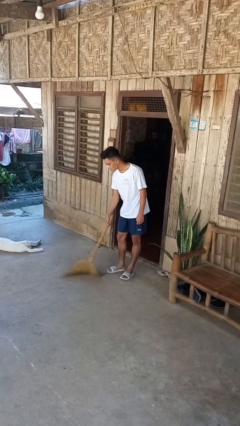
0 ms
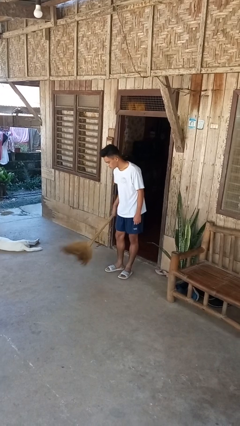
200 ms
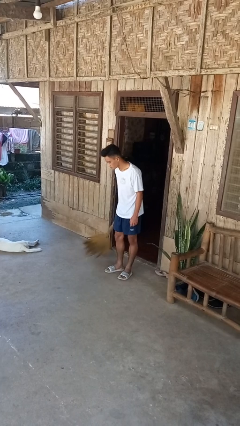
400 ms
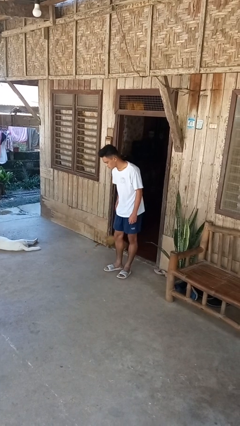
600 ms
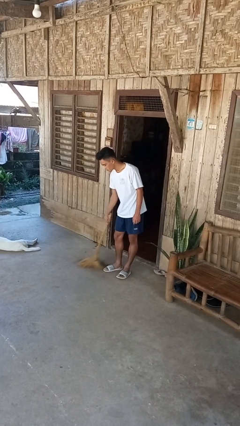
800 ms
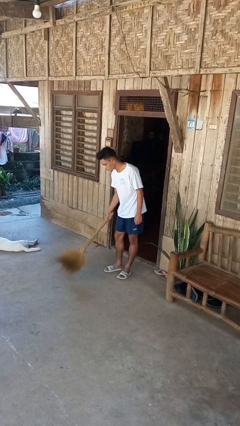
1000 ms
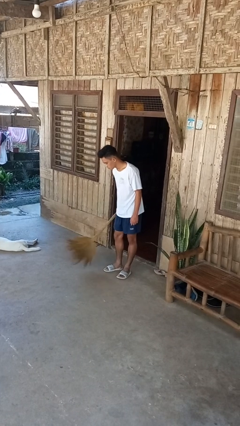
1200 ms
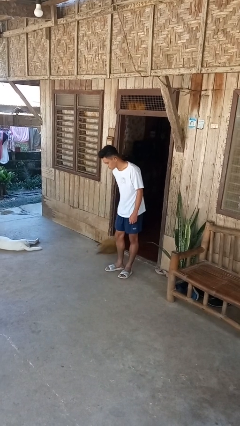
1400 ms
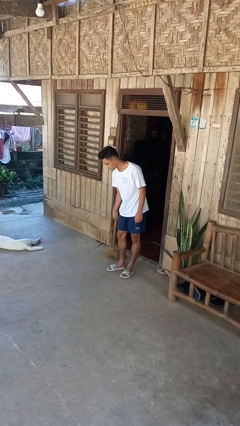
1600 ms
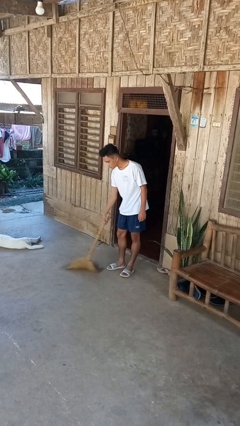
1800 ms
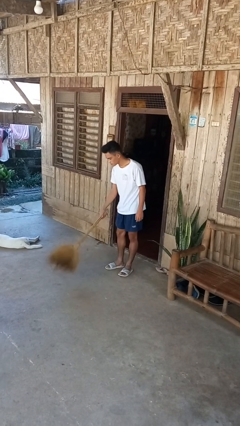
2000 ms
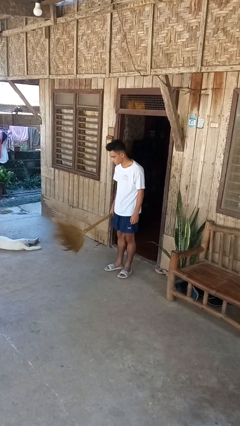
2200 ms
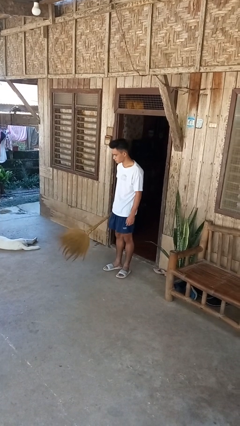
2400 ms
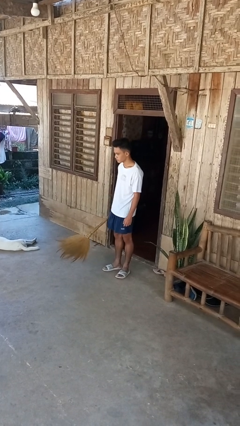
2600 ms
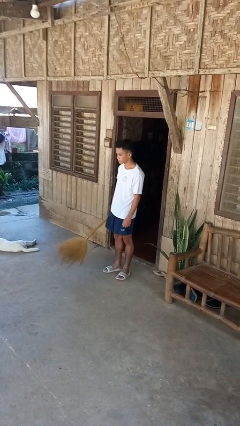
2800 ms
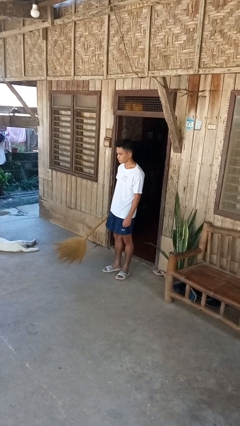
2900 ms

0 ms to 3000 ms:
person sweeps floor

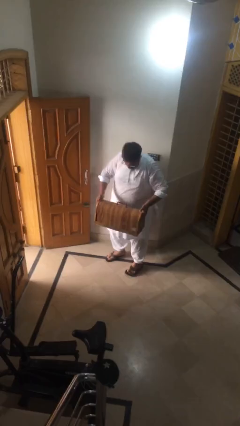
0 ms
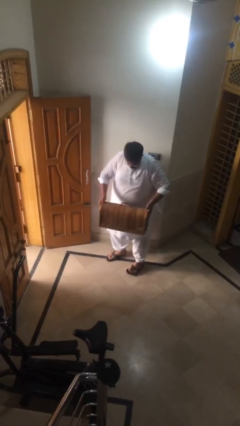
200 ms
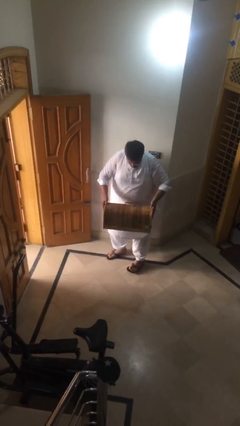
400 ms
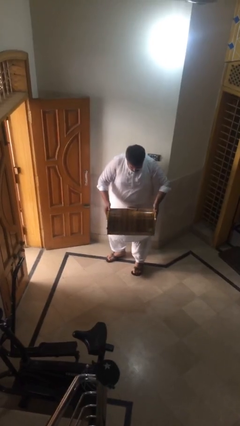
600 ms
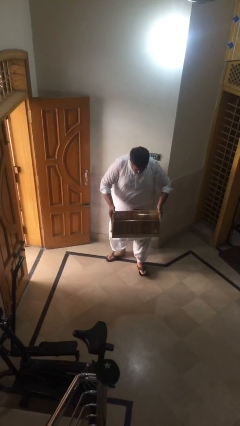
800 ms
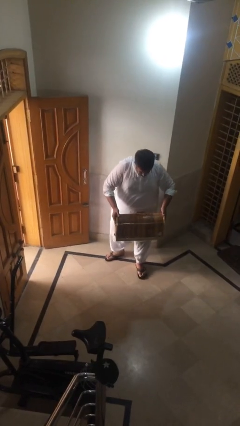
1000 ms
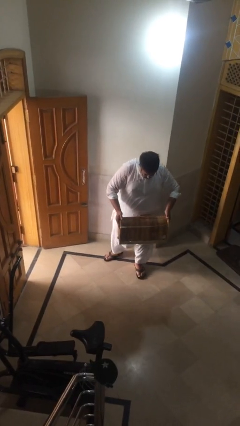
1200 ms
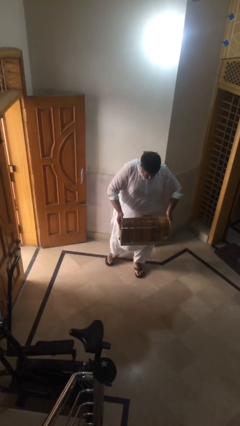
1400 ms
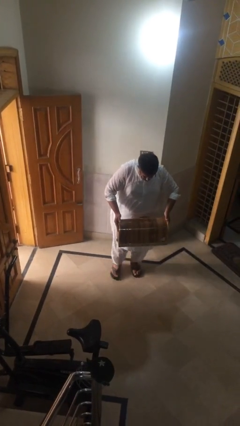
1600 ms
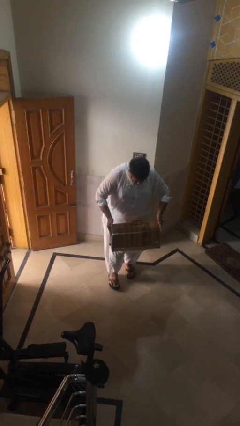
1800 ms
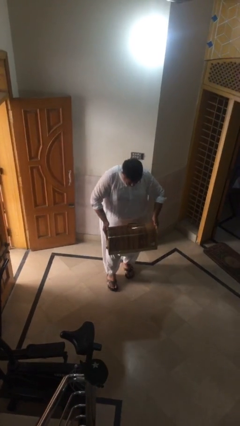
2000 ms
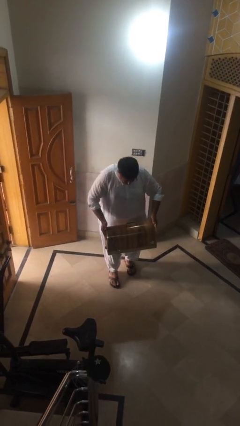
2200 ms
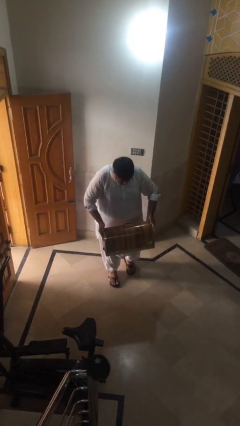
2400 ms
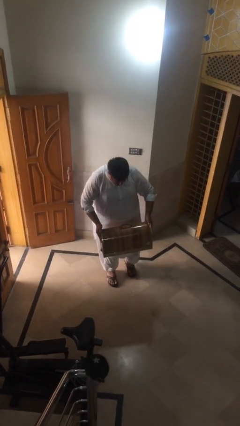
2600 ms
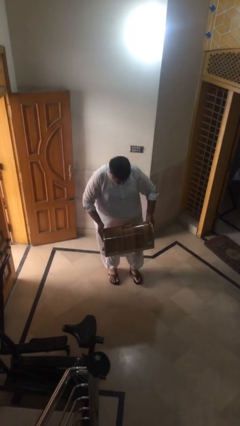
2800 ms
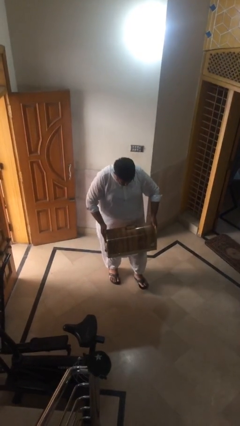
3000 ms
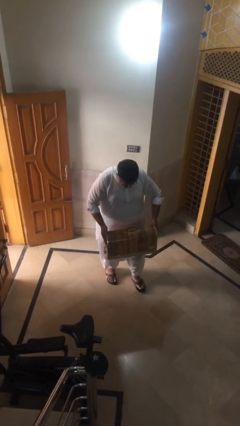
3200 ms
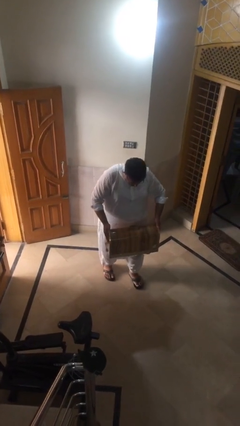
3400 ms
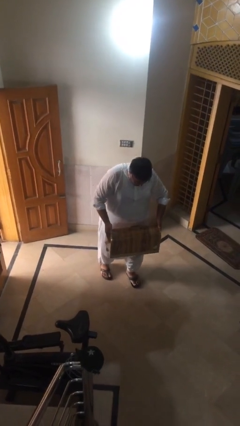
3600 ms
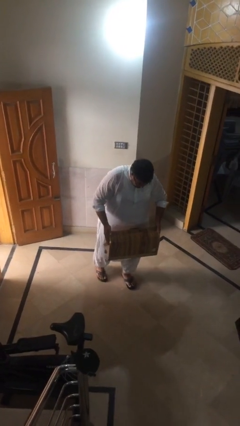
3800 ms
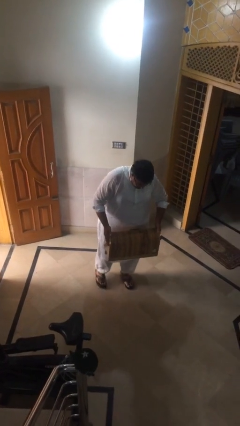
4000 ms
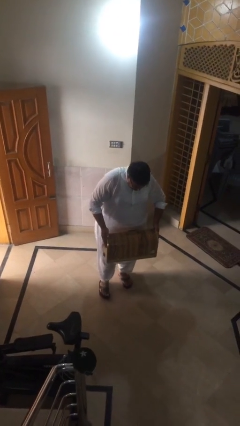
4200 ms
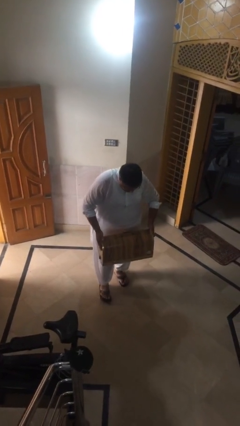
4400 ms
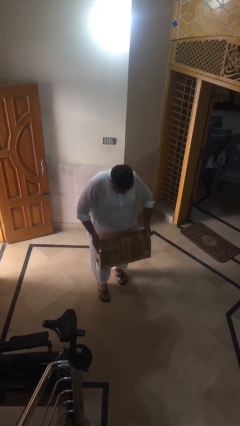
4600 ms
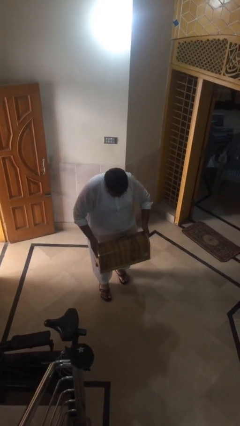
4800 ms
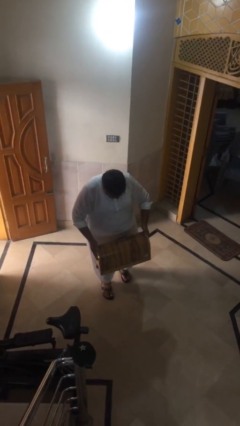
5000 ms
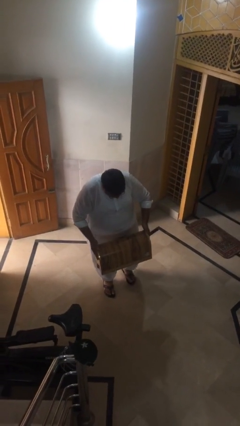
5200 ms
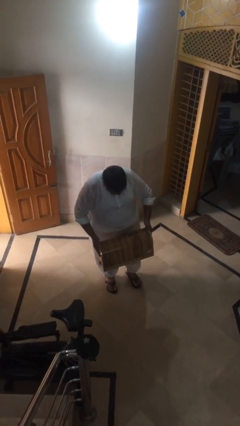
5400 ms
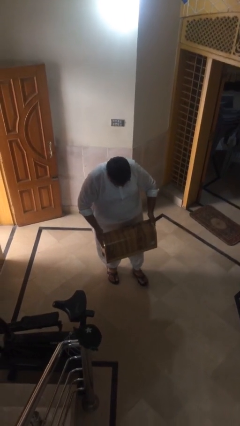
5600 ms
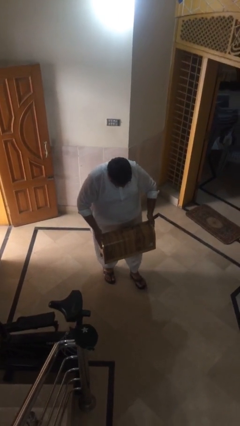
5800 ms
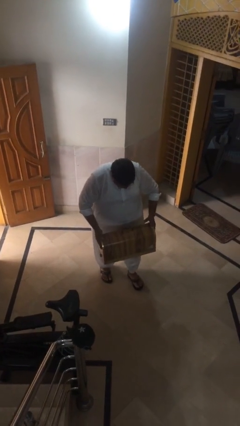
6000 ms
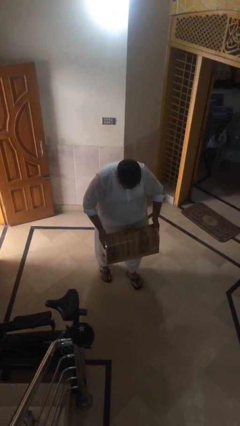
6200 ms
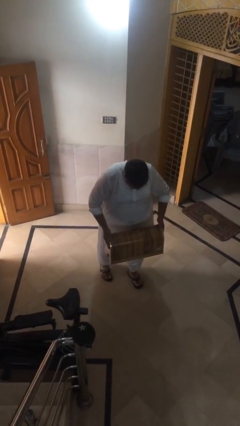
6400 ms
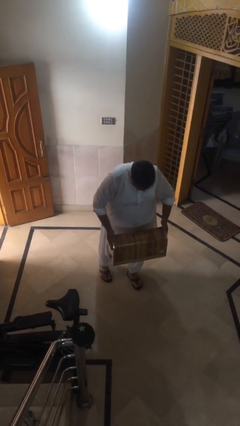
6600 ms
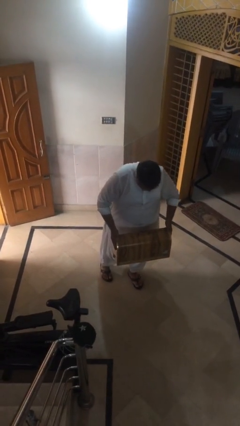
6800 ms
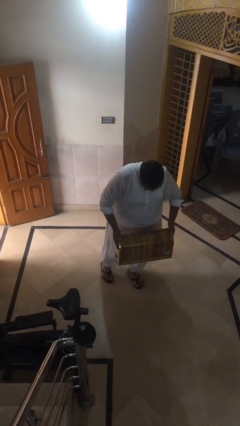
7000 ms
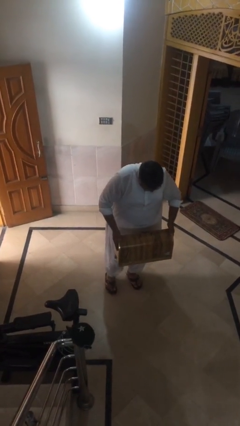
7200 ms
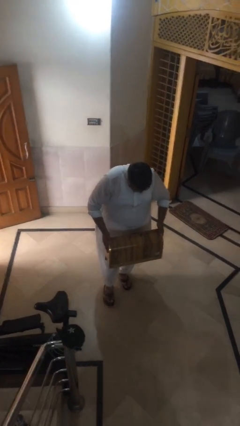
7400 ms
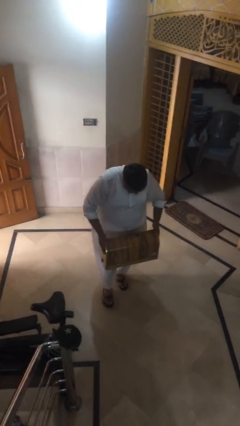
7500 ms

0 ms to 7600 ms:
person carries heavy object

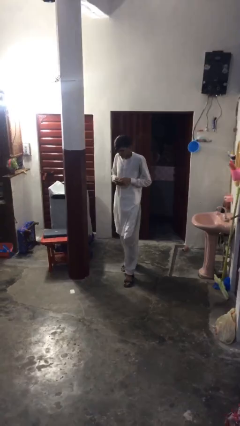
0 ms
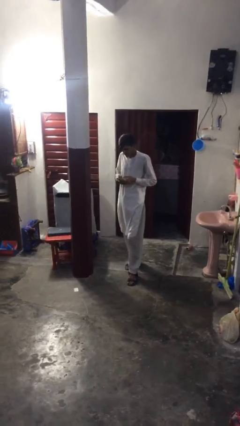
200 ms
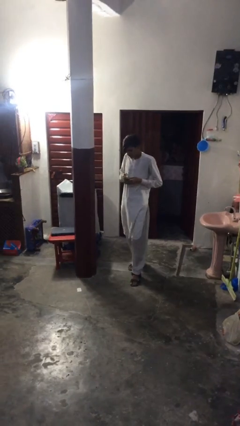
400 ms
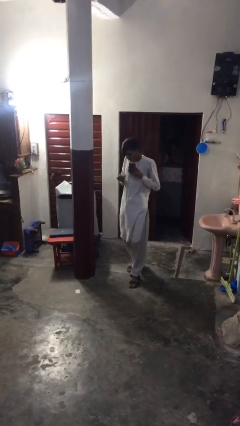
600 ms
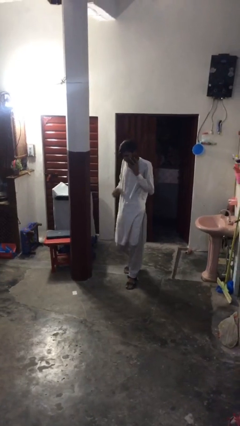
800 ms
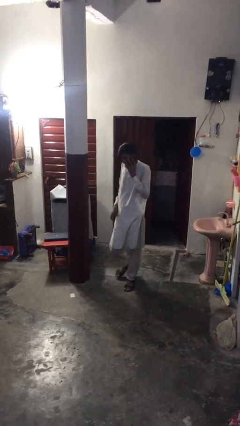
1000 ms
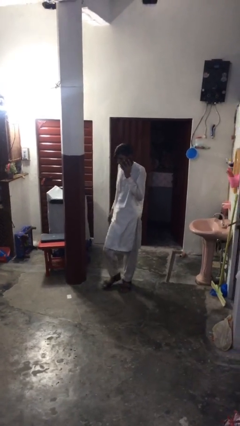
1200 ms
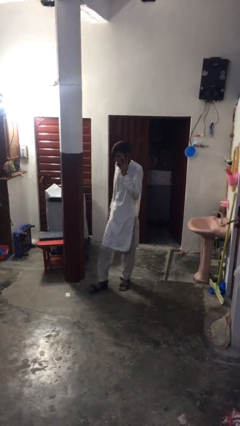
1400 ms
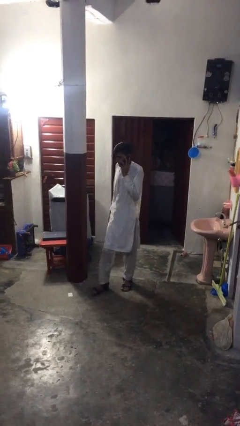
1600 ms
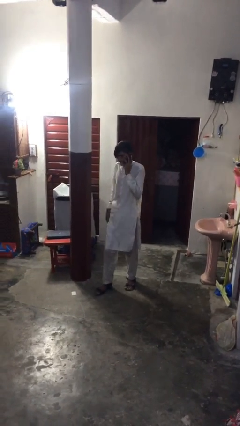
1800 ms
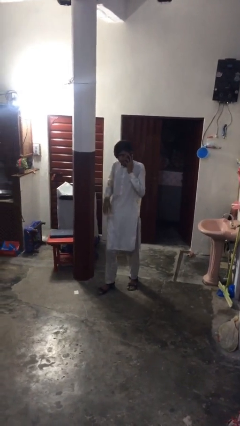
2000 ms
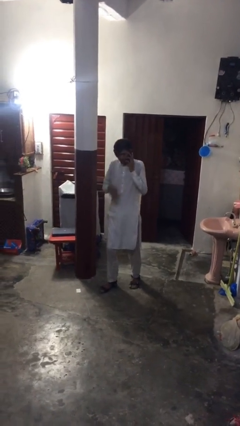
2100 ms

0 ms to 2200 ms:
person talks on phone

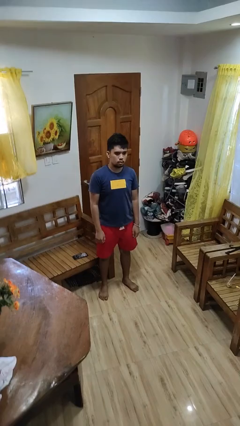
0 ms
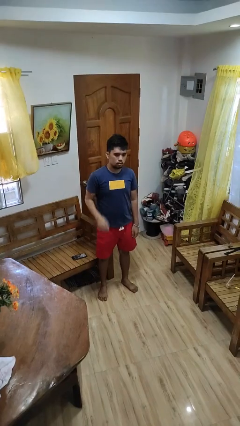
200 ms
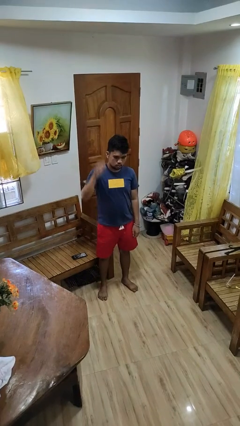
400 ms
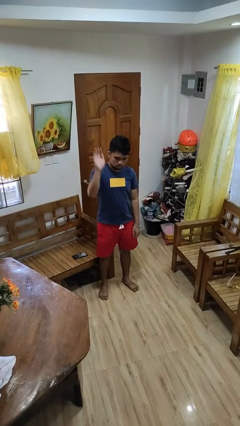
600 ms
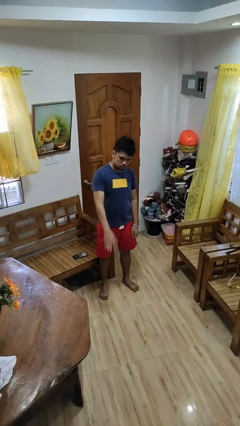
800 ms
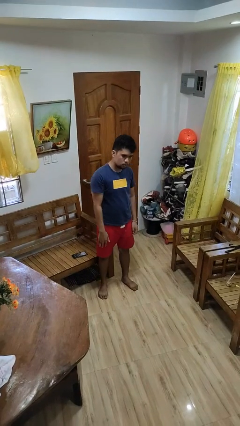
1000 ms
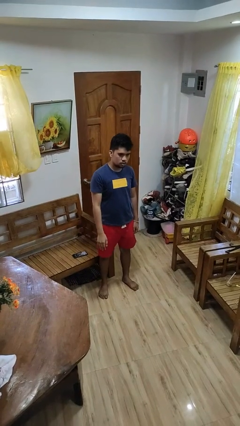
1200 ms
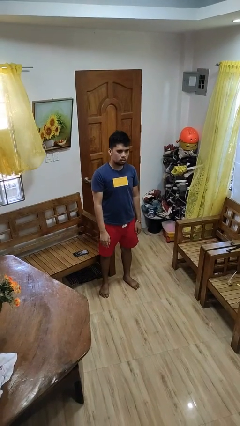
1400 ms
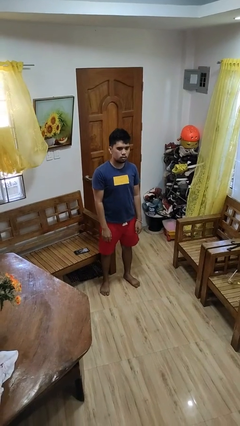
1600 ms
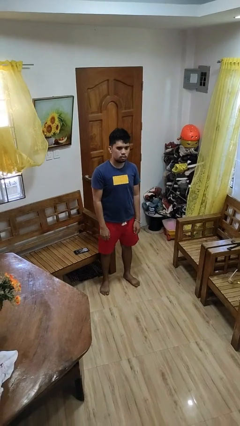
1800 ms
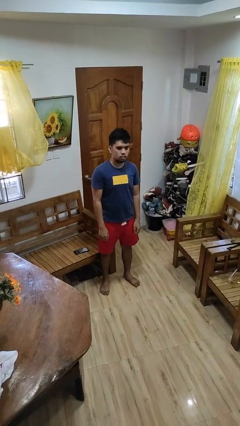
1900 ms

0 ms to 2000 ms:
person gestures swipe down

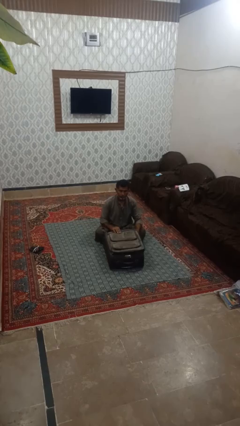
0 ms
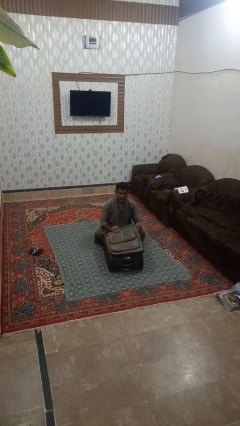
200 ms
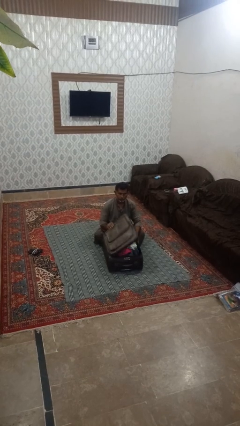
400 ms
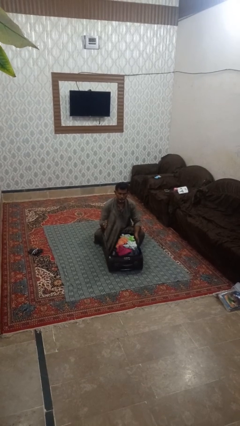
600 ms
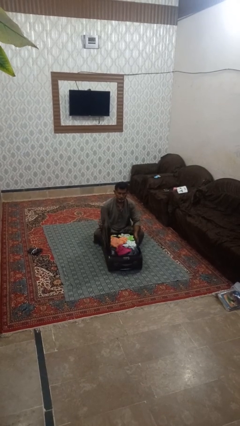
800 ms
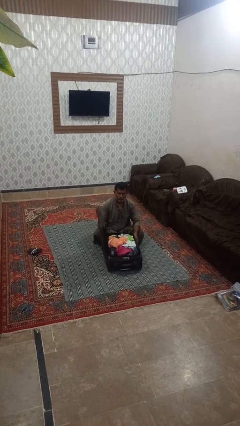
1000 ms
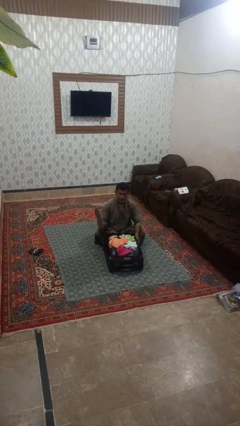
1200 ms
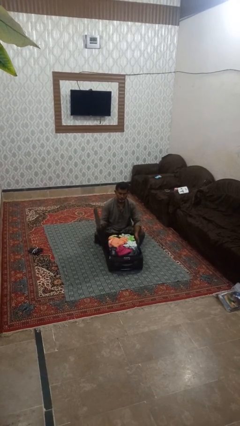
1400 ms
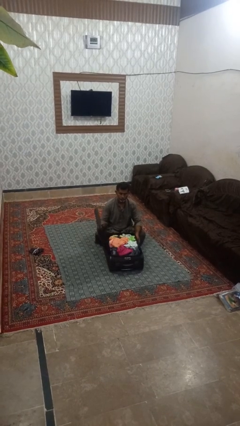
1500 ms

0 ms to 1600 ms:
person opens suitcase

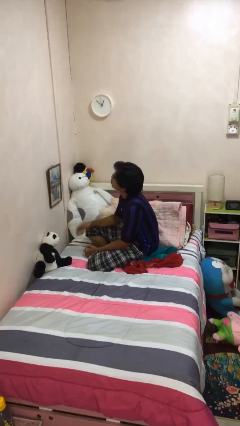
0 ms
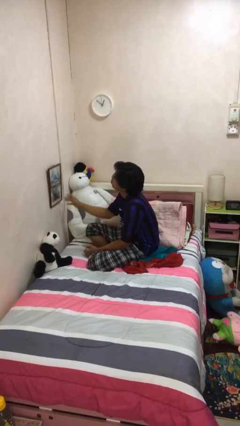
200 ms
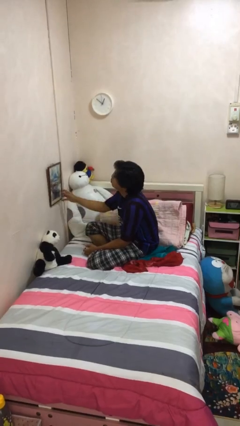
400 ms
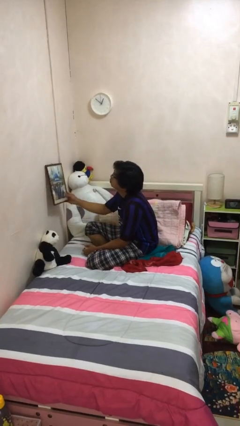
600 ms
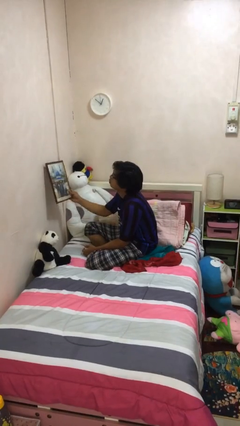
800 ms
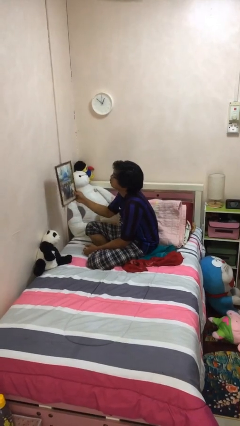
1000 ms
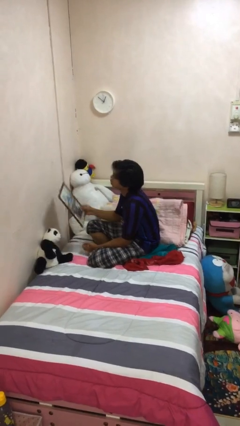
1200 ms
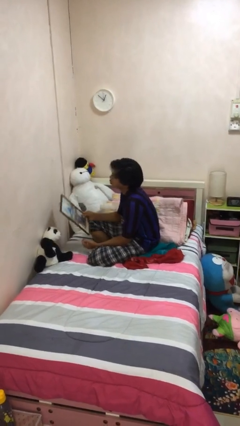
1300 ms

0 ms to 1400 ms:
person takes down picture frame
